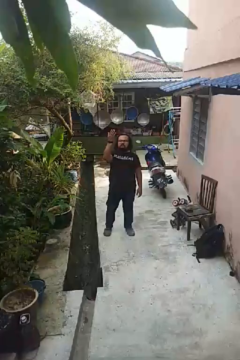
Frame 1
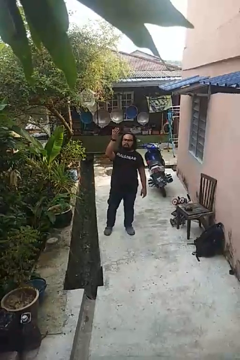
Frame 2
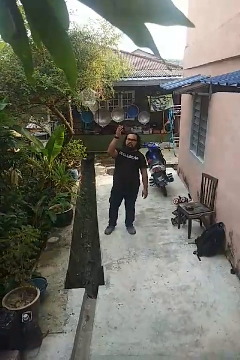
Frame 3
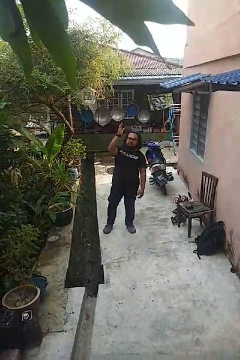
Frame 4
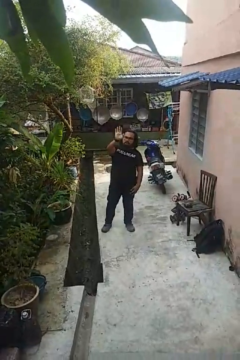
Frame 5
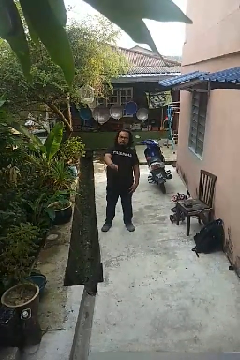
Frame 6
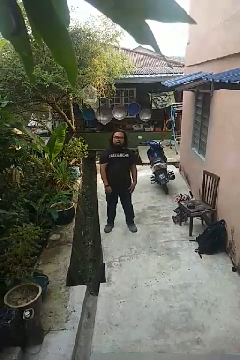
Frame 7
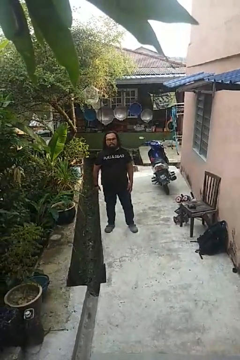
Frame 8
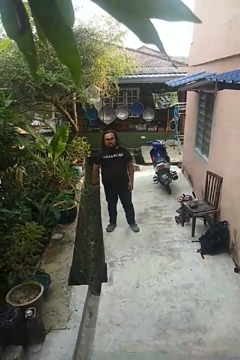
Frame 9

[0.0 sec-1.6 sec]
person gestures swipe down

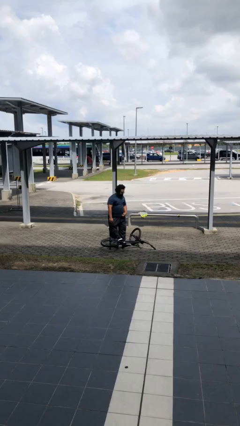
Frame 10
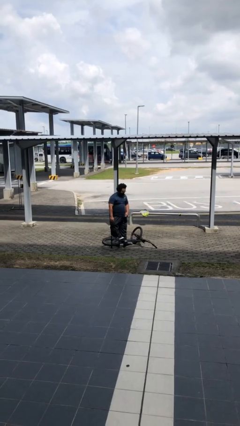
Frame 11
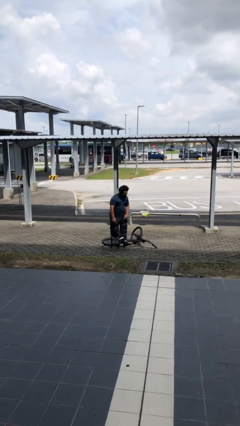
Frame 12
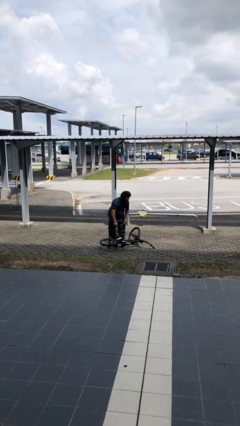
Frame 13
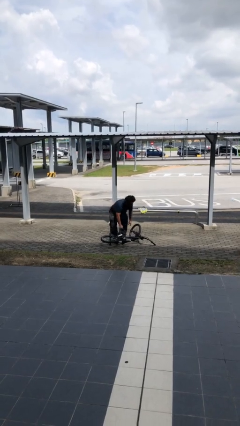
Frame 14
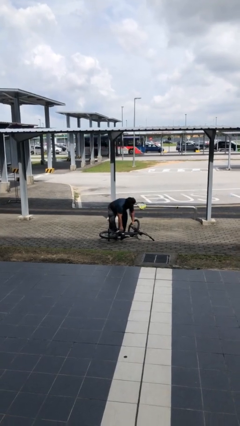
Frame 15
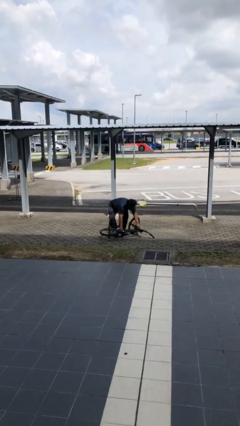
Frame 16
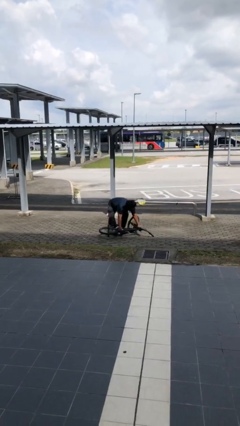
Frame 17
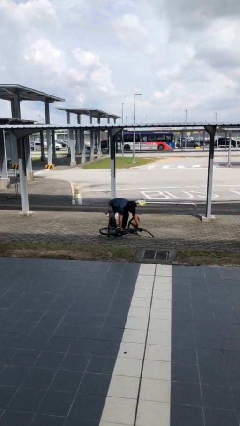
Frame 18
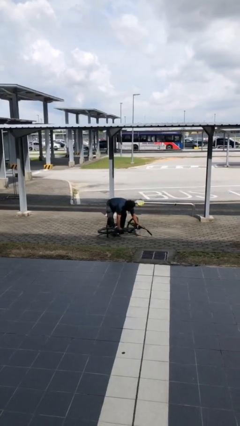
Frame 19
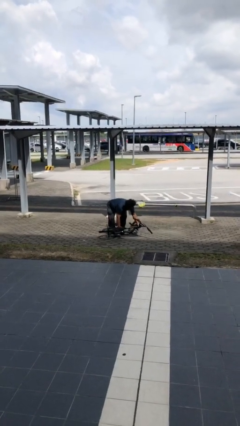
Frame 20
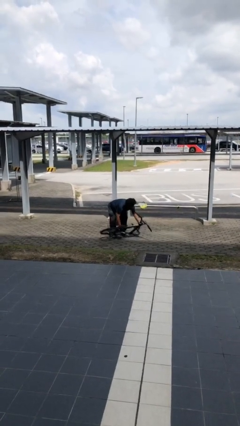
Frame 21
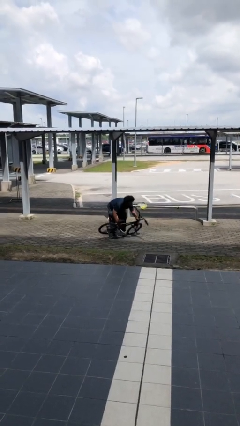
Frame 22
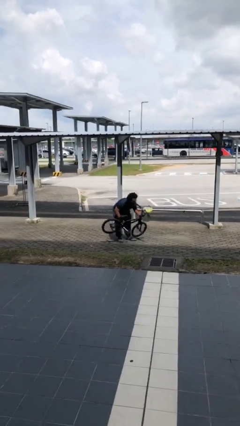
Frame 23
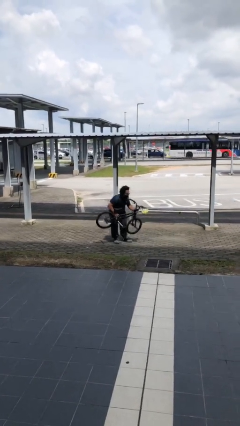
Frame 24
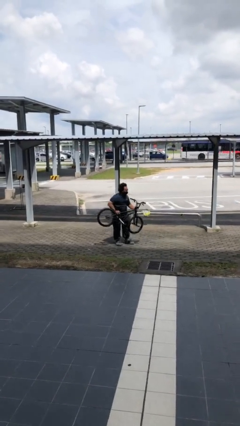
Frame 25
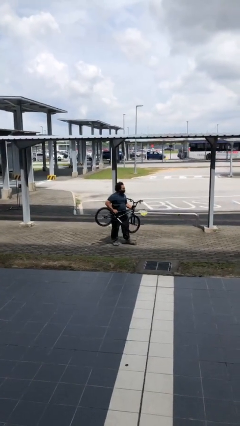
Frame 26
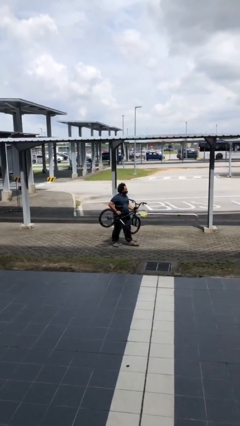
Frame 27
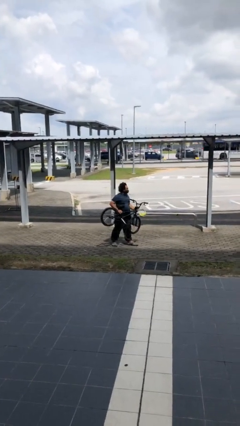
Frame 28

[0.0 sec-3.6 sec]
person picks up object from floor

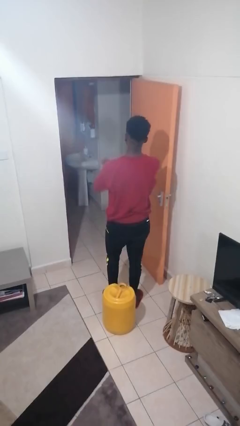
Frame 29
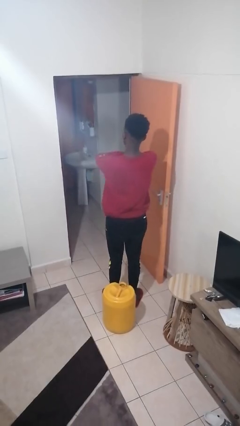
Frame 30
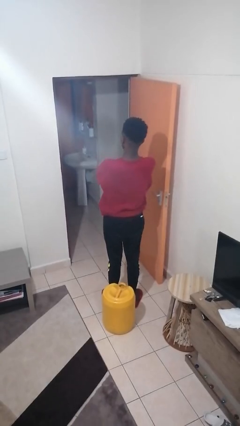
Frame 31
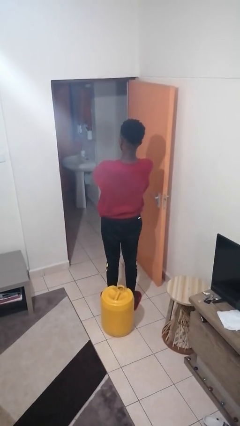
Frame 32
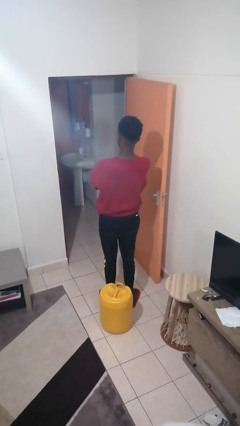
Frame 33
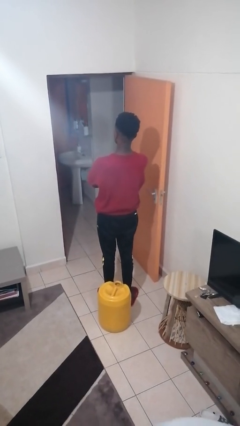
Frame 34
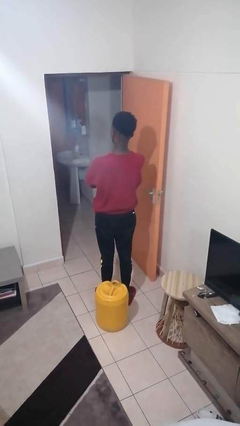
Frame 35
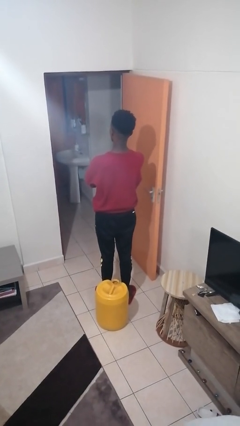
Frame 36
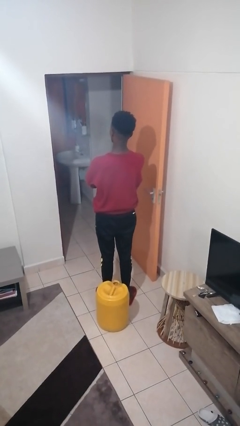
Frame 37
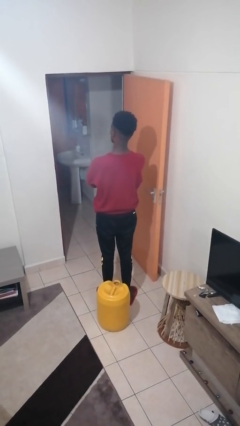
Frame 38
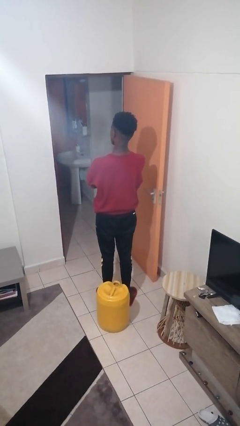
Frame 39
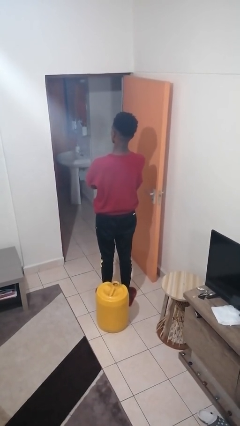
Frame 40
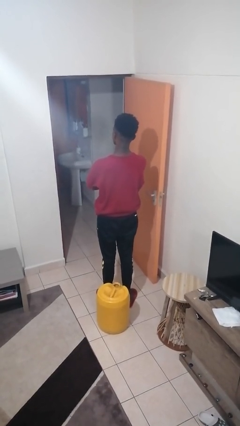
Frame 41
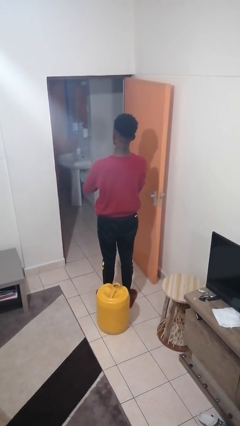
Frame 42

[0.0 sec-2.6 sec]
person crosses arms

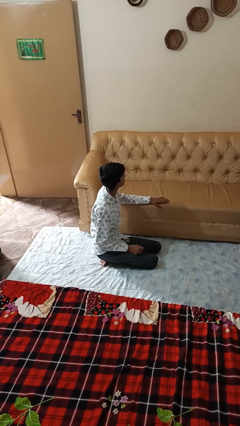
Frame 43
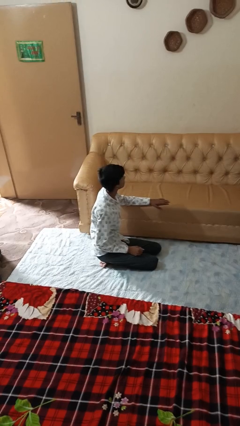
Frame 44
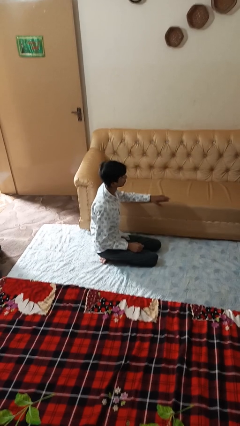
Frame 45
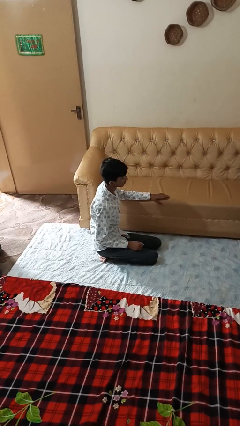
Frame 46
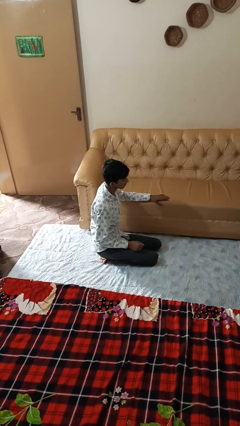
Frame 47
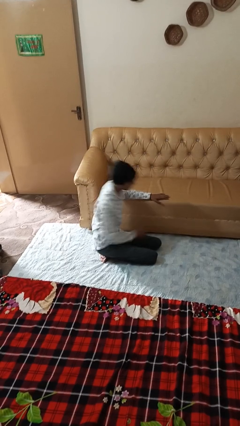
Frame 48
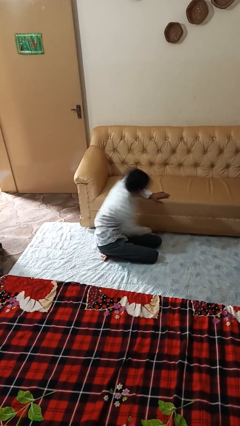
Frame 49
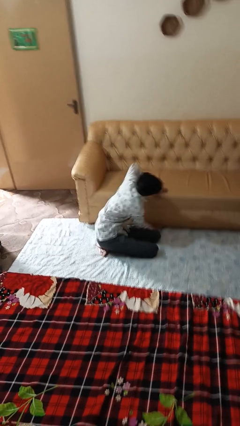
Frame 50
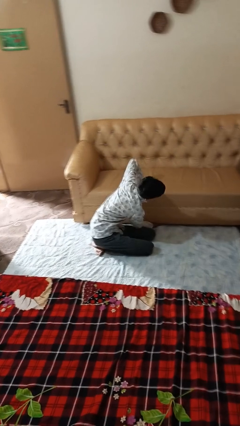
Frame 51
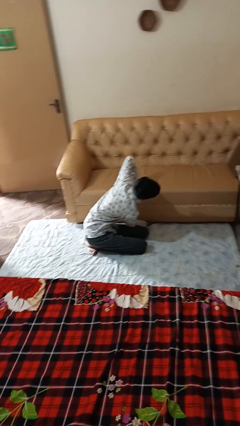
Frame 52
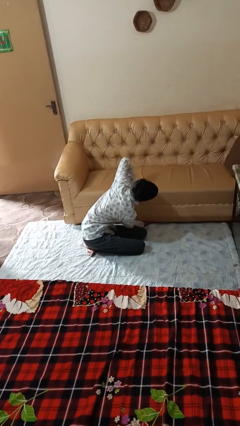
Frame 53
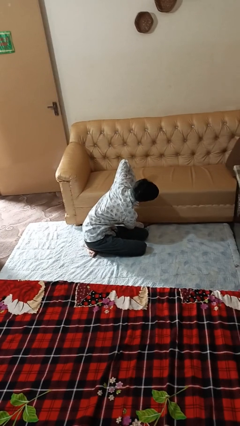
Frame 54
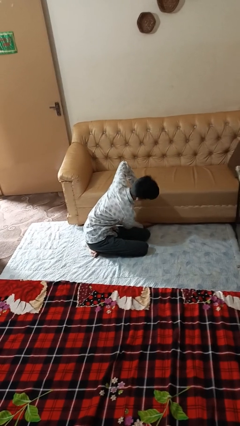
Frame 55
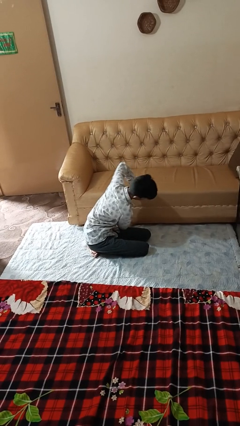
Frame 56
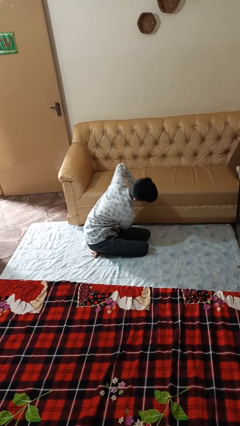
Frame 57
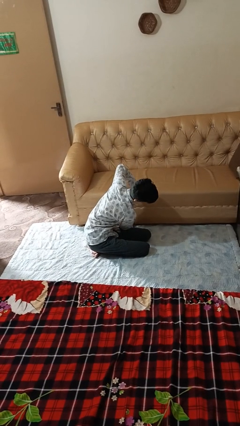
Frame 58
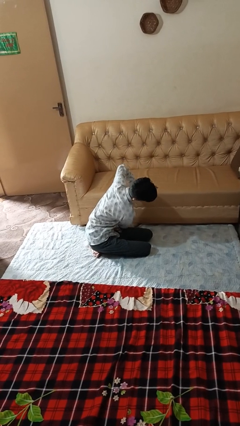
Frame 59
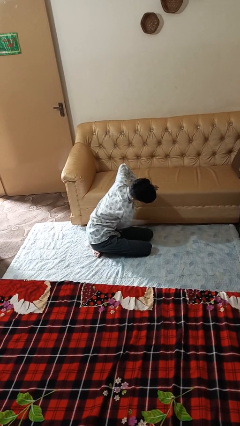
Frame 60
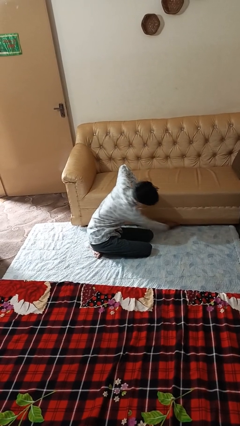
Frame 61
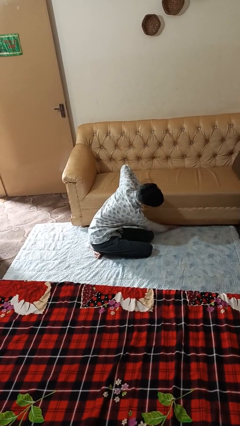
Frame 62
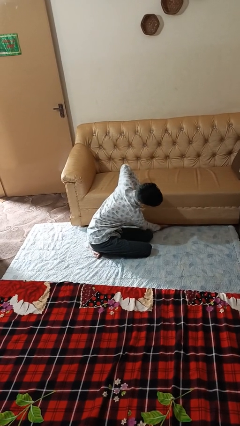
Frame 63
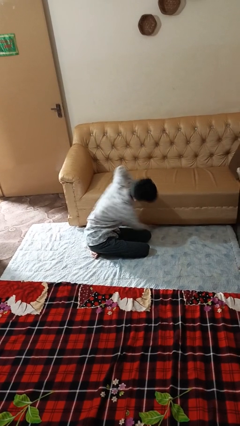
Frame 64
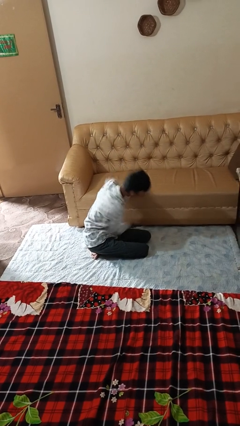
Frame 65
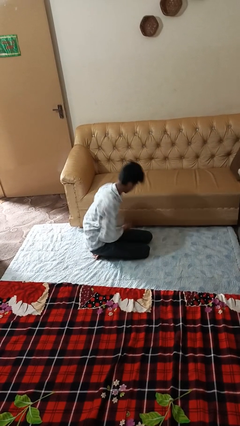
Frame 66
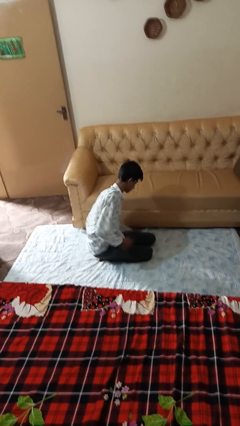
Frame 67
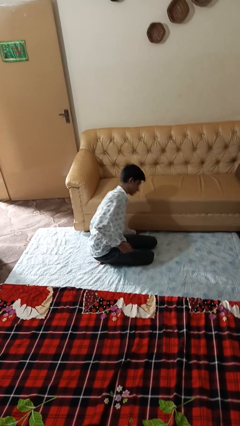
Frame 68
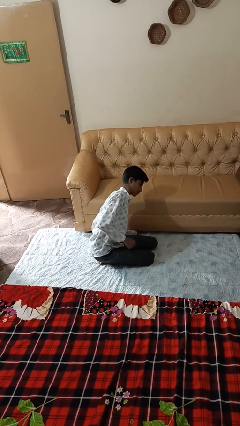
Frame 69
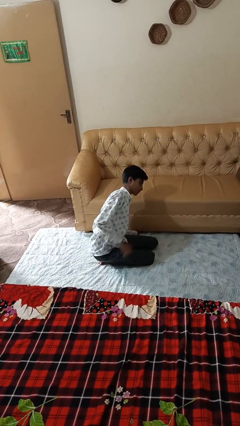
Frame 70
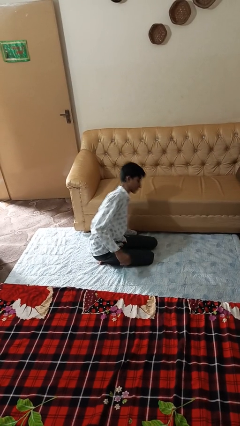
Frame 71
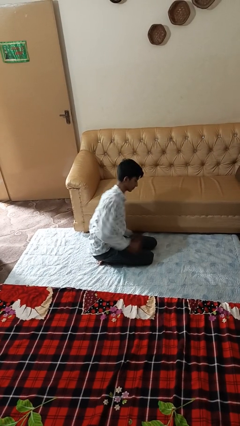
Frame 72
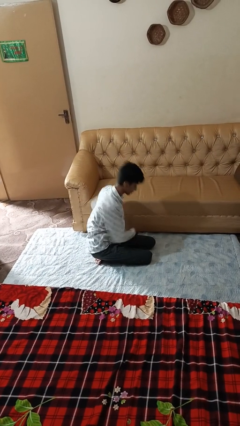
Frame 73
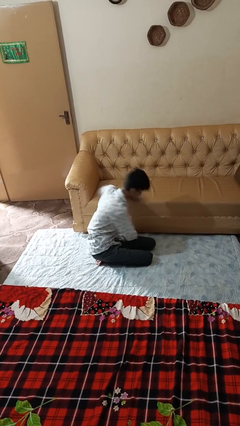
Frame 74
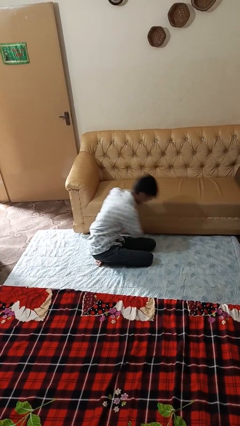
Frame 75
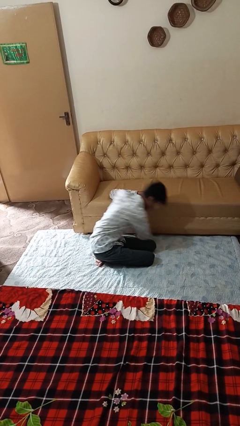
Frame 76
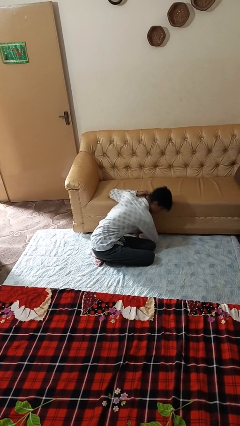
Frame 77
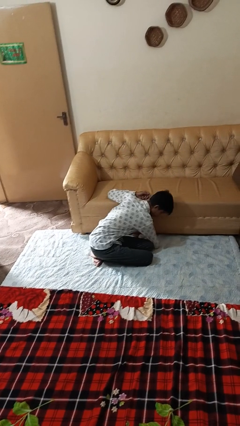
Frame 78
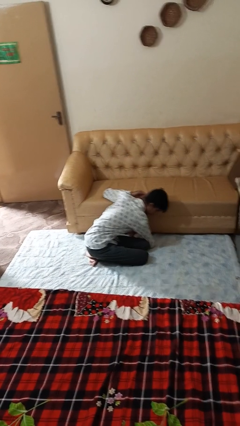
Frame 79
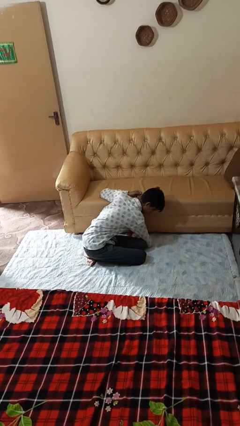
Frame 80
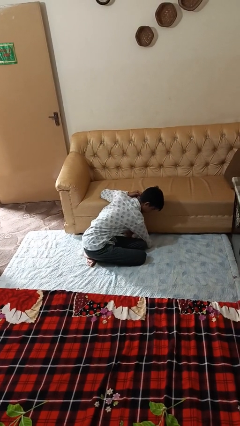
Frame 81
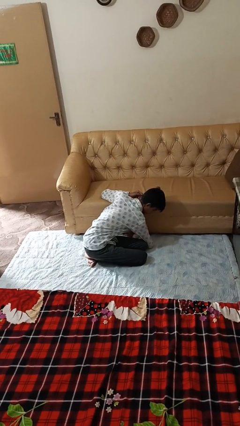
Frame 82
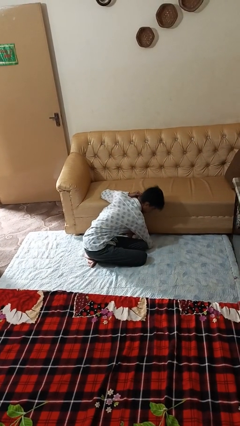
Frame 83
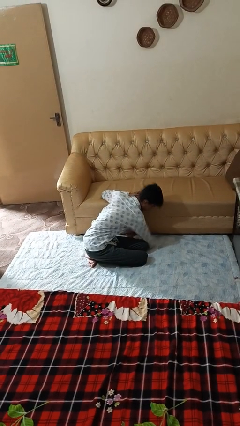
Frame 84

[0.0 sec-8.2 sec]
person searches under couch

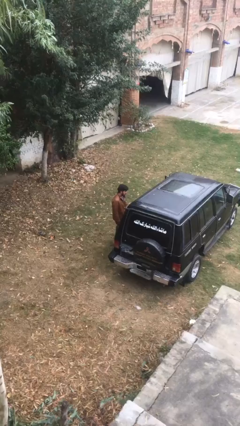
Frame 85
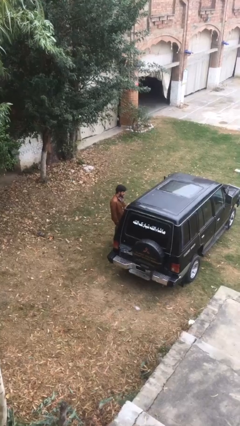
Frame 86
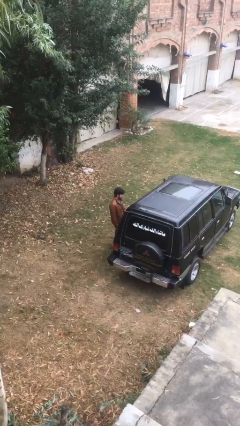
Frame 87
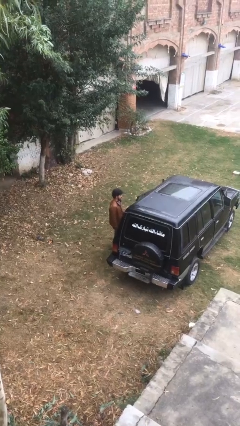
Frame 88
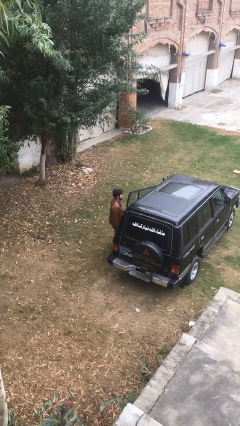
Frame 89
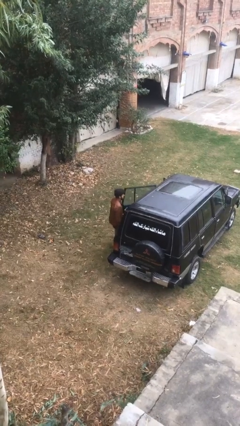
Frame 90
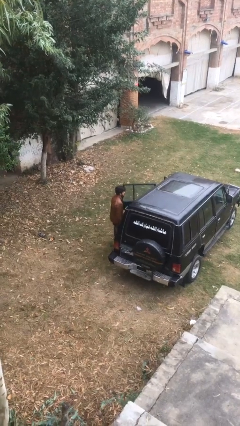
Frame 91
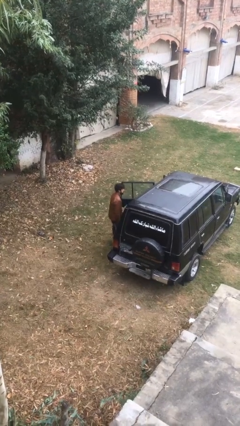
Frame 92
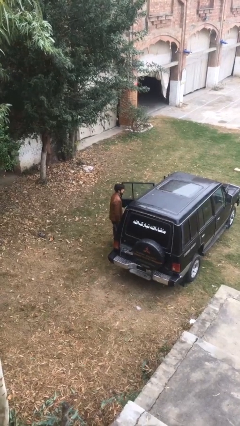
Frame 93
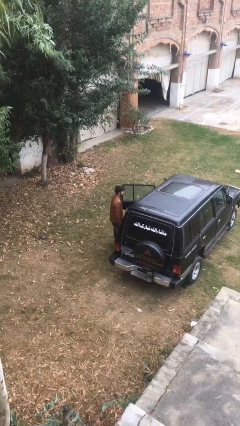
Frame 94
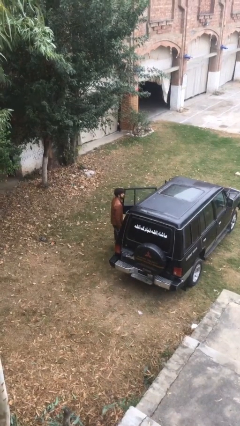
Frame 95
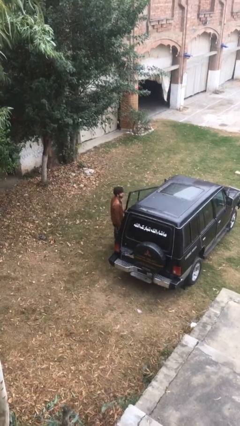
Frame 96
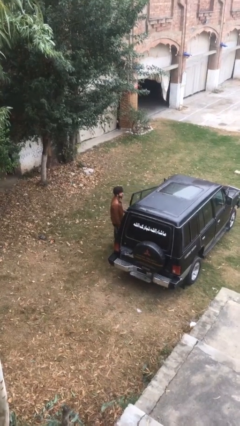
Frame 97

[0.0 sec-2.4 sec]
person opens car door
